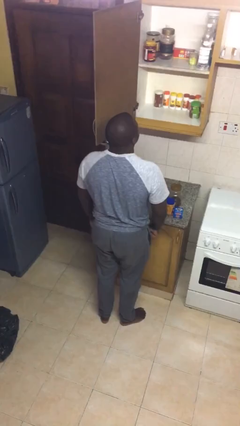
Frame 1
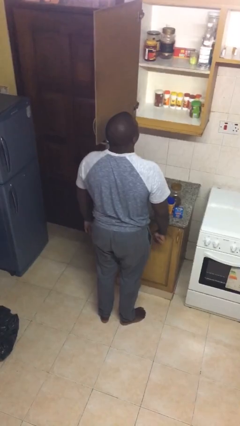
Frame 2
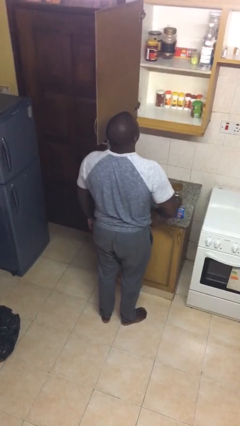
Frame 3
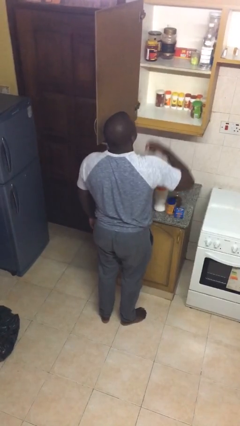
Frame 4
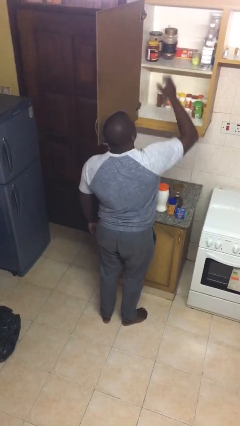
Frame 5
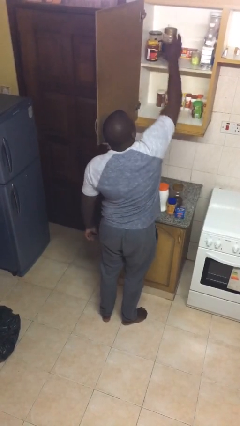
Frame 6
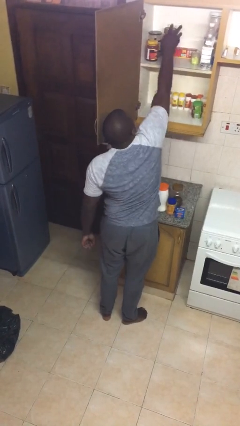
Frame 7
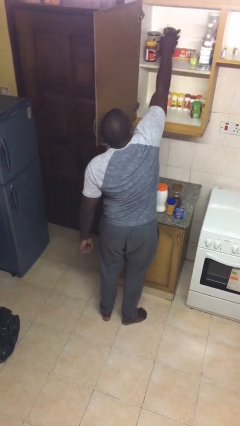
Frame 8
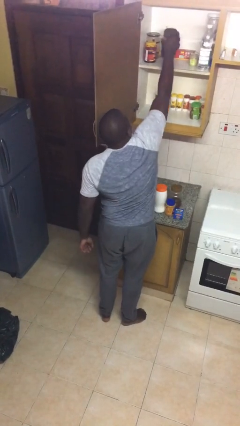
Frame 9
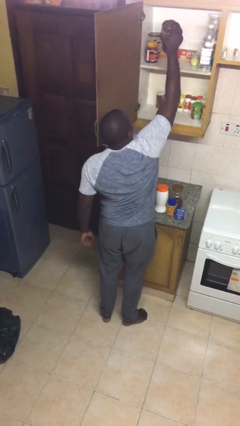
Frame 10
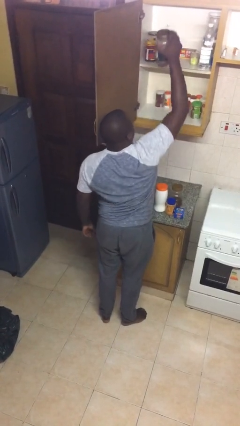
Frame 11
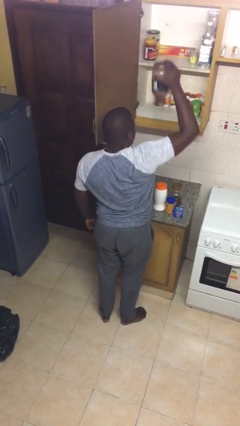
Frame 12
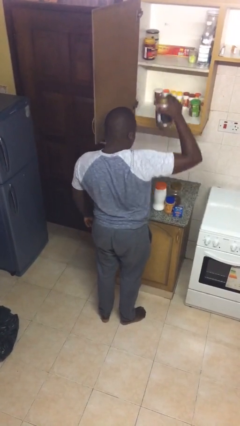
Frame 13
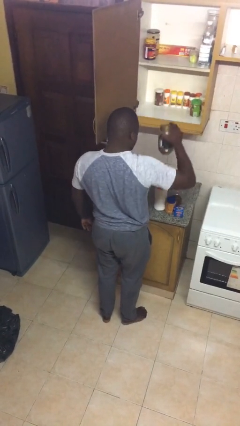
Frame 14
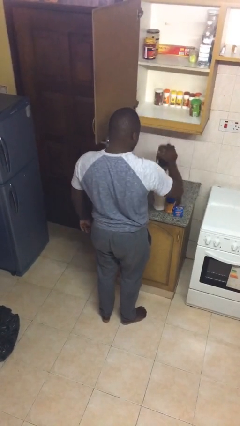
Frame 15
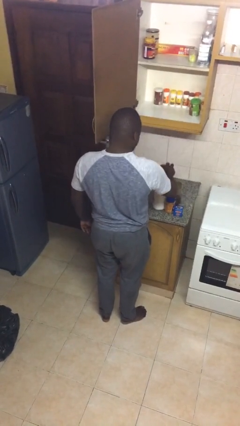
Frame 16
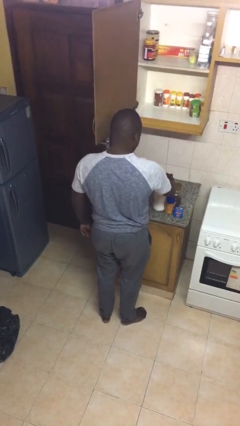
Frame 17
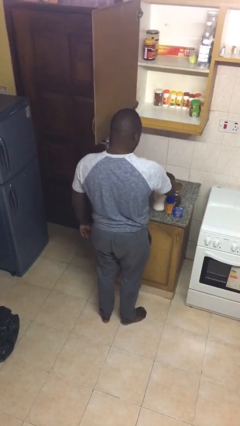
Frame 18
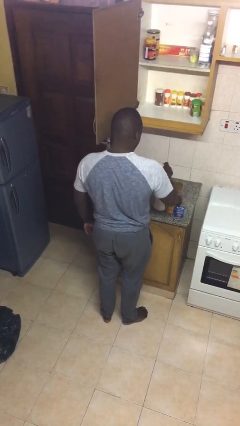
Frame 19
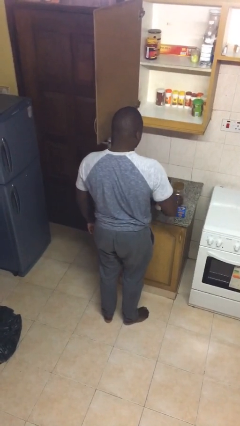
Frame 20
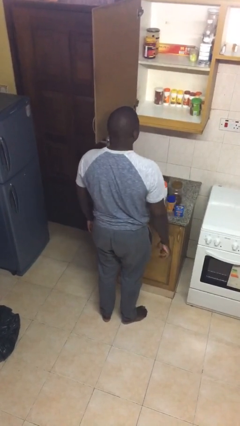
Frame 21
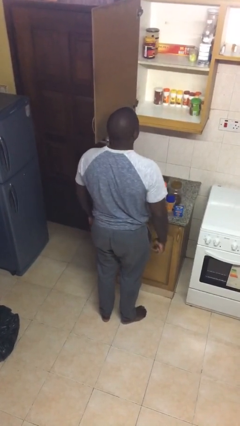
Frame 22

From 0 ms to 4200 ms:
person takes object from cabinet

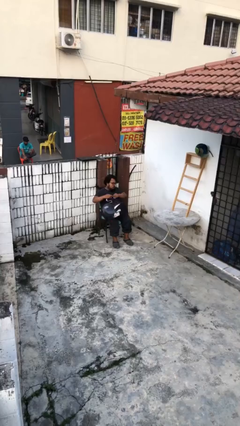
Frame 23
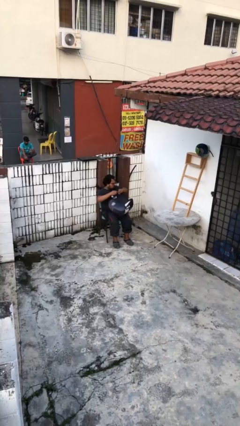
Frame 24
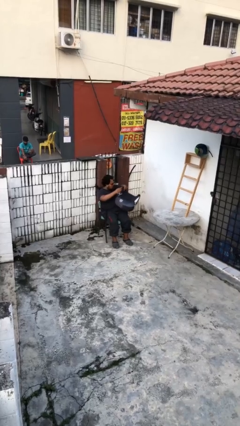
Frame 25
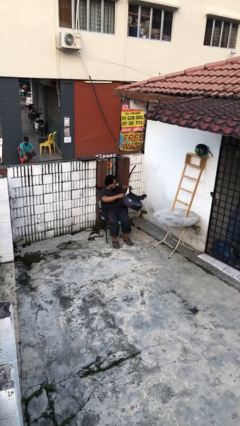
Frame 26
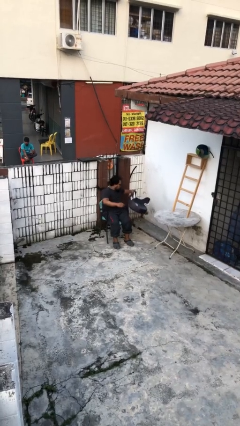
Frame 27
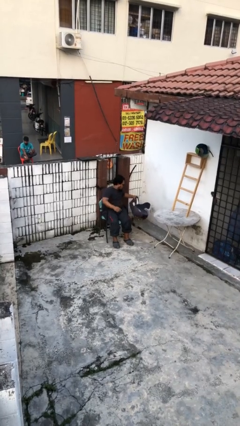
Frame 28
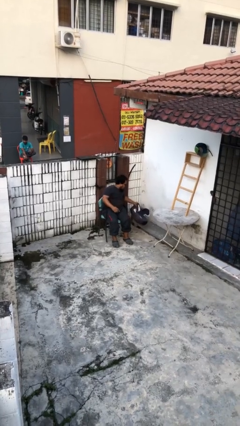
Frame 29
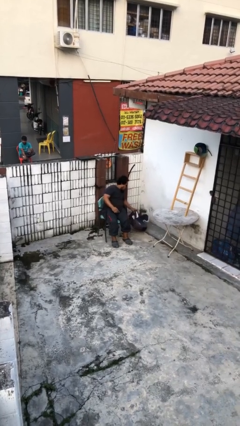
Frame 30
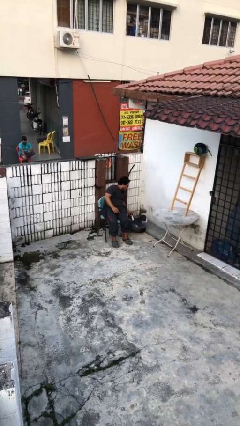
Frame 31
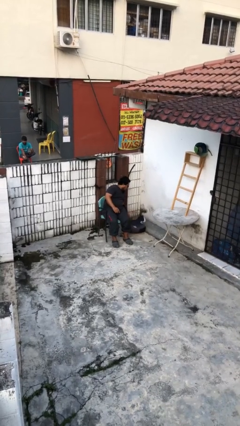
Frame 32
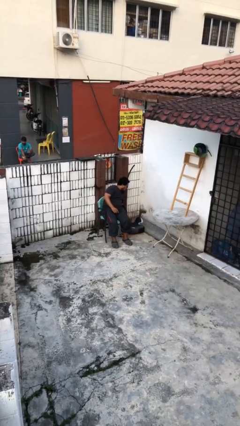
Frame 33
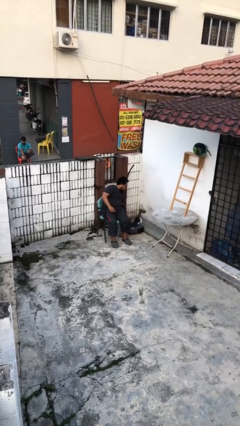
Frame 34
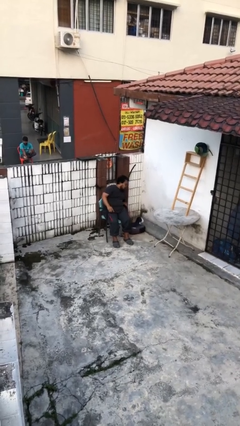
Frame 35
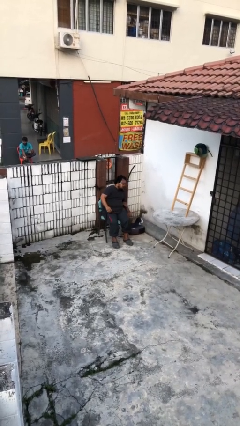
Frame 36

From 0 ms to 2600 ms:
person puts down object on floor

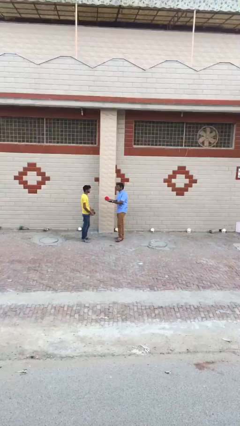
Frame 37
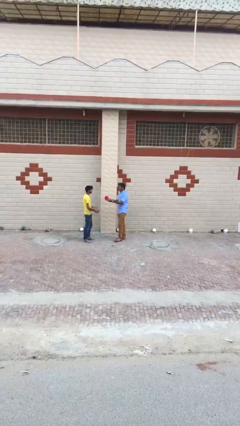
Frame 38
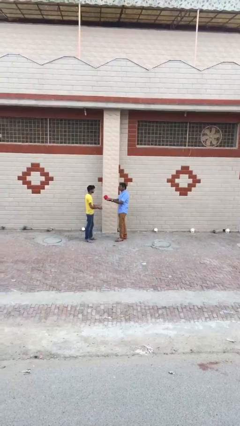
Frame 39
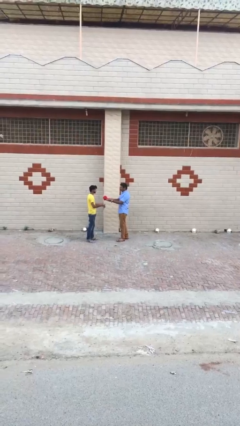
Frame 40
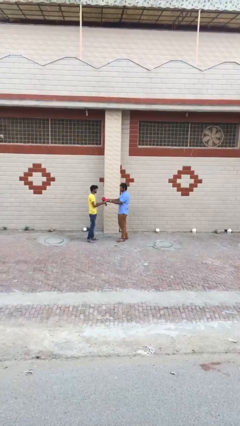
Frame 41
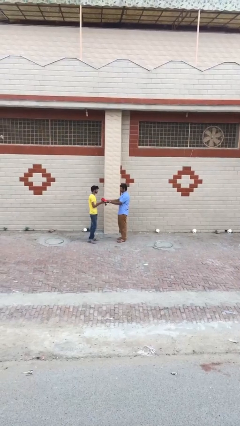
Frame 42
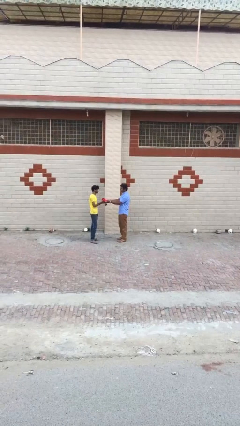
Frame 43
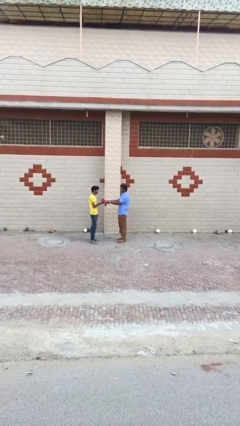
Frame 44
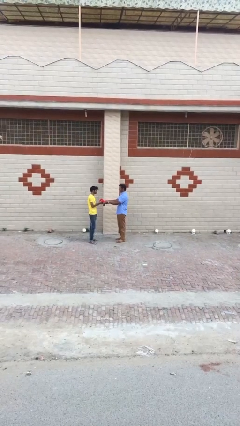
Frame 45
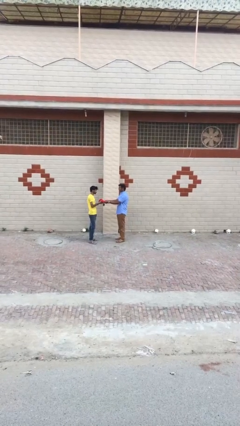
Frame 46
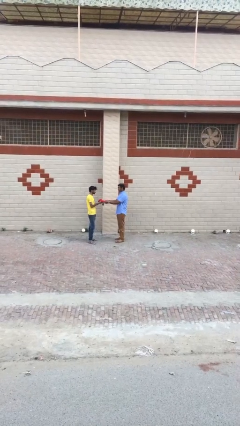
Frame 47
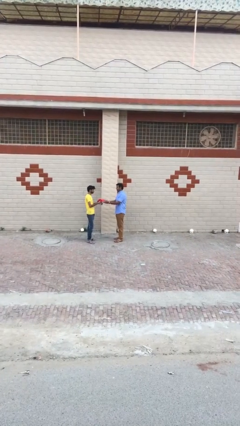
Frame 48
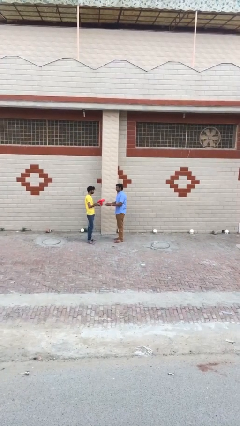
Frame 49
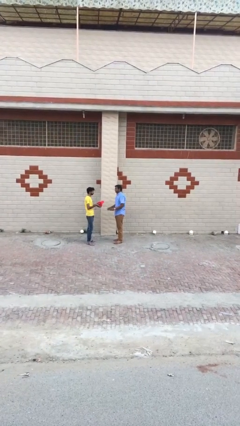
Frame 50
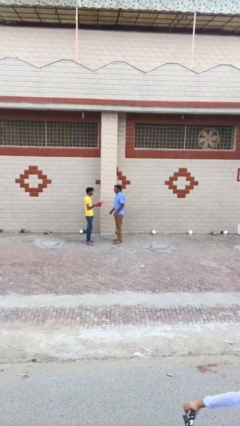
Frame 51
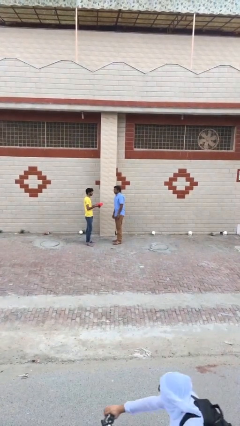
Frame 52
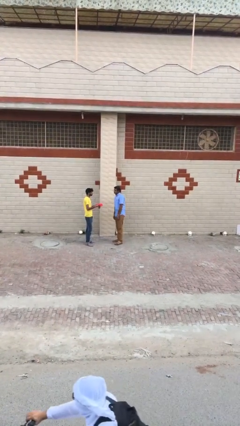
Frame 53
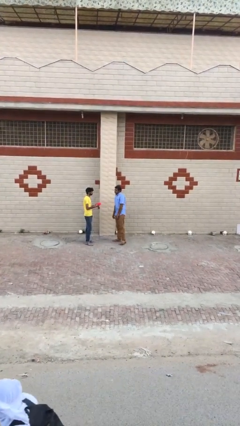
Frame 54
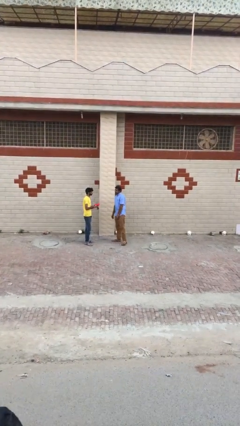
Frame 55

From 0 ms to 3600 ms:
person transfers object to person

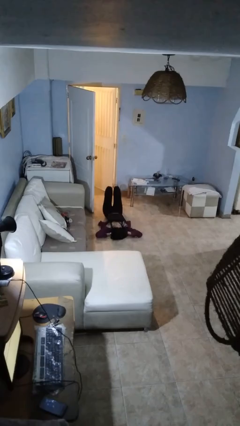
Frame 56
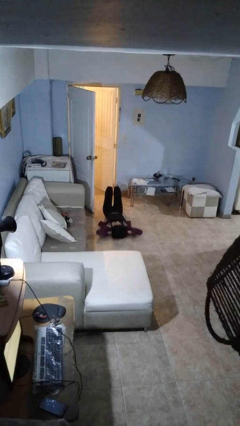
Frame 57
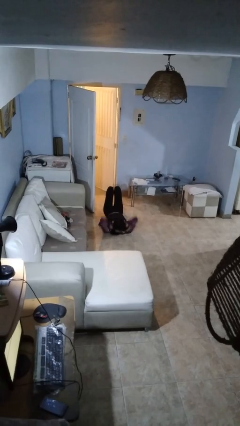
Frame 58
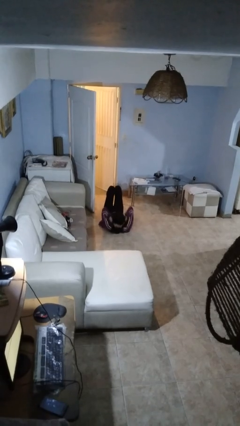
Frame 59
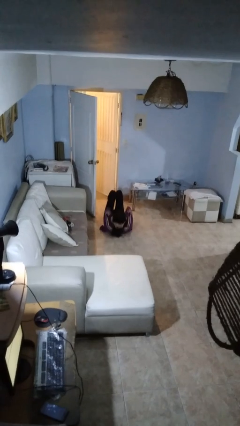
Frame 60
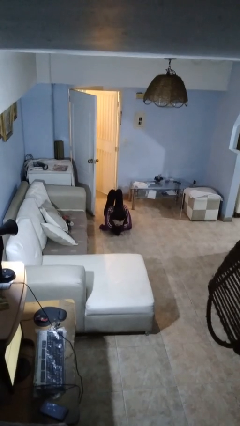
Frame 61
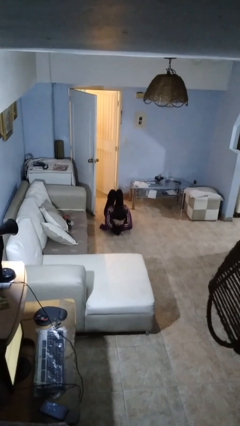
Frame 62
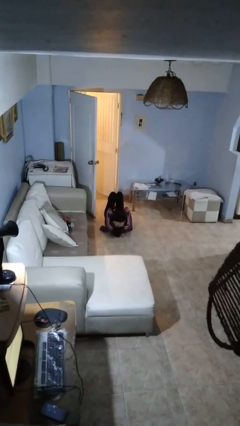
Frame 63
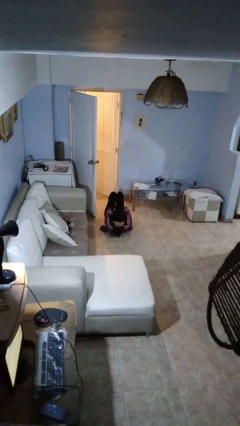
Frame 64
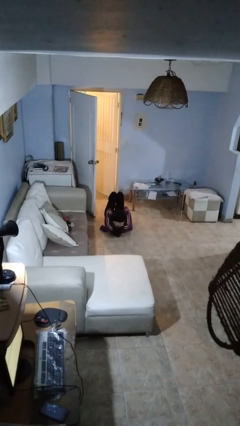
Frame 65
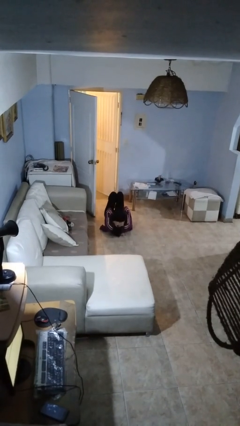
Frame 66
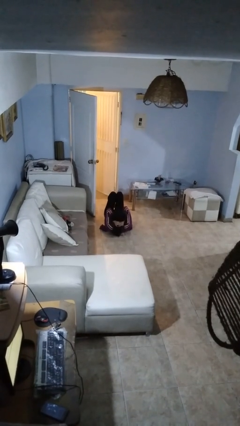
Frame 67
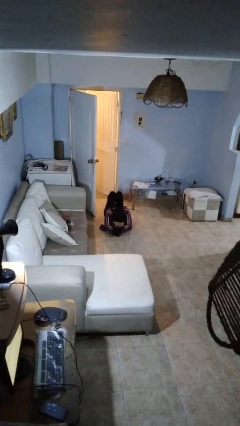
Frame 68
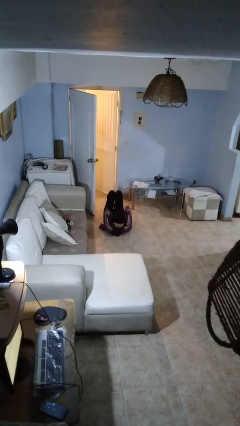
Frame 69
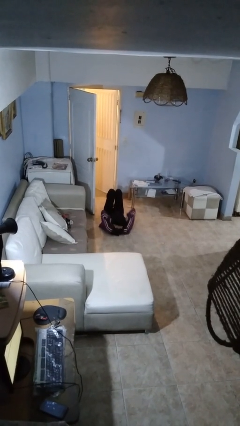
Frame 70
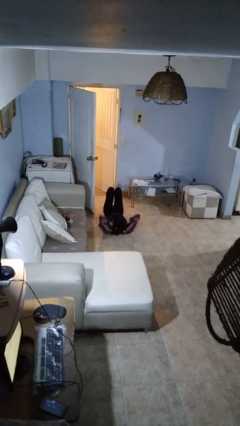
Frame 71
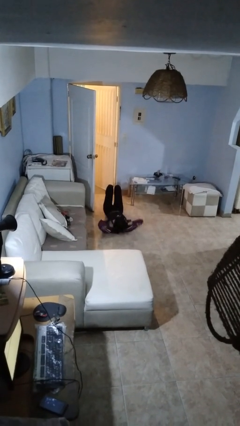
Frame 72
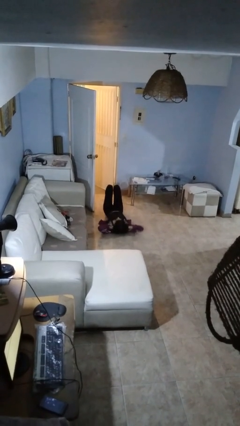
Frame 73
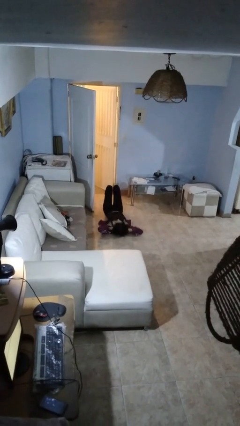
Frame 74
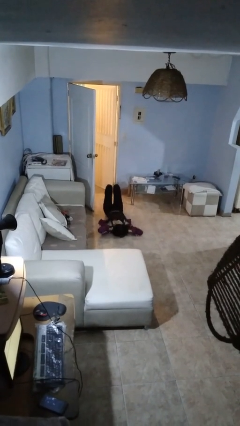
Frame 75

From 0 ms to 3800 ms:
person exercises with situp

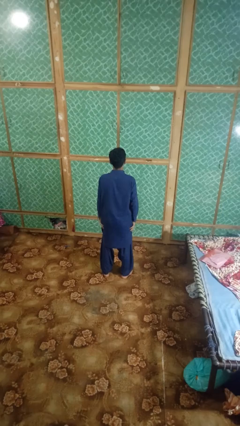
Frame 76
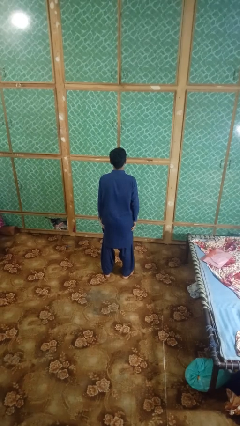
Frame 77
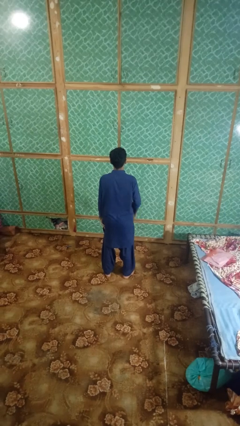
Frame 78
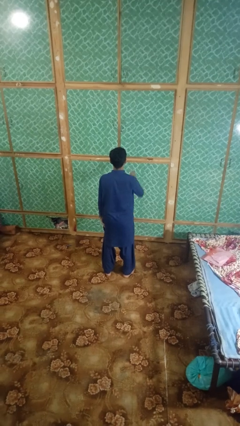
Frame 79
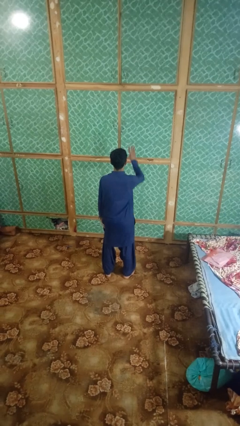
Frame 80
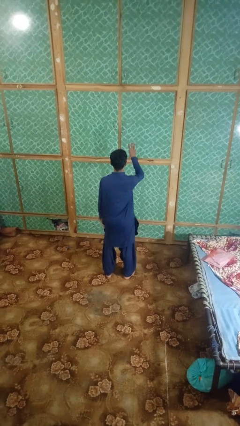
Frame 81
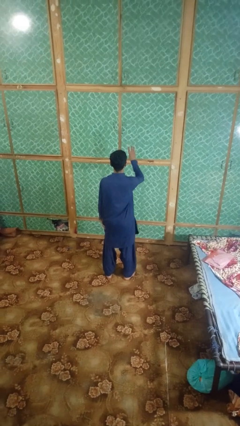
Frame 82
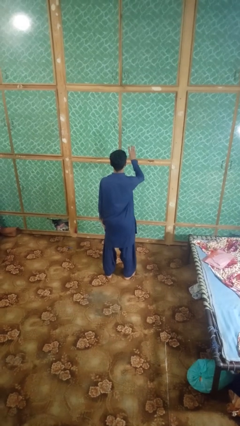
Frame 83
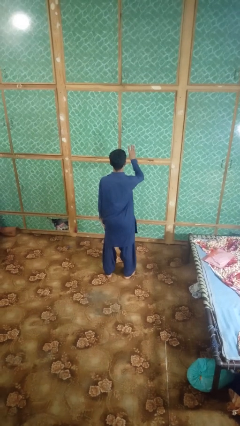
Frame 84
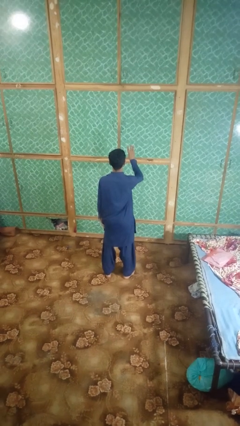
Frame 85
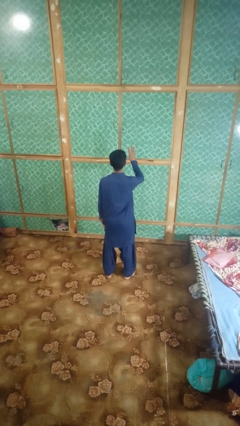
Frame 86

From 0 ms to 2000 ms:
person gestures number three

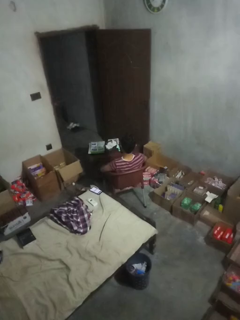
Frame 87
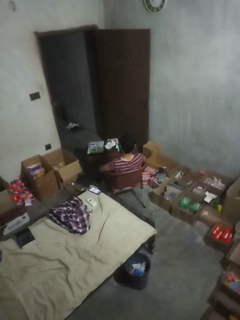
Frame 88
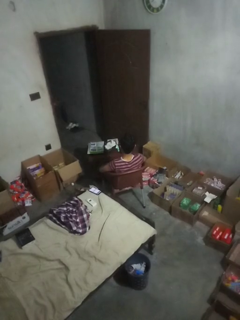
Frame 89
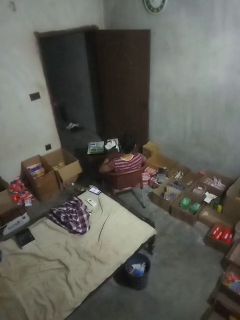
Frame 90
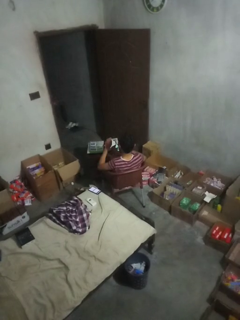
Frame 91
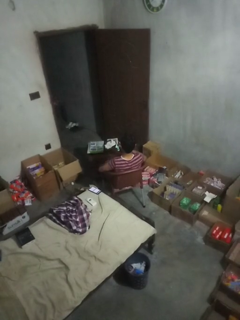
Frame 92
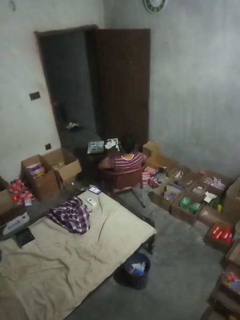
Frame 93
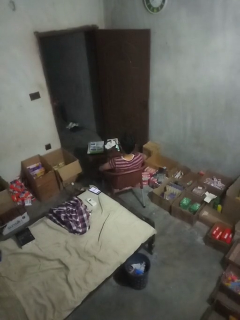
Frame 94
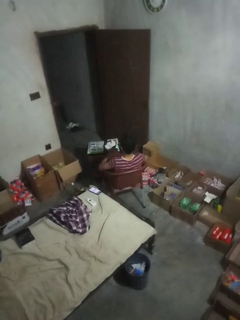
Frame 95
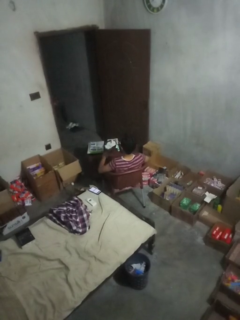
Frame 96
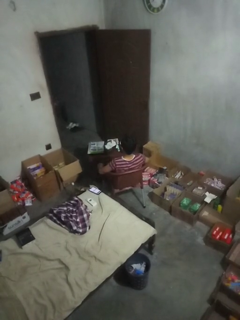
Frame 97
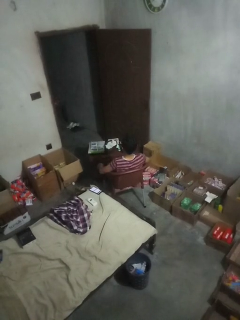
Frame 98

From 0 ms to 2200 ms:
person slaps hands on thighs
